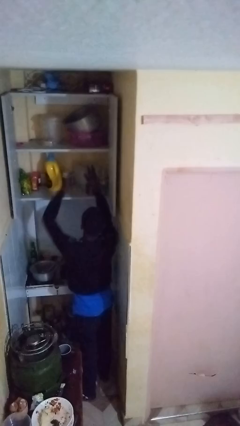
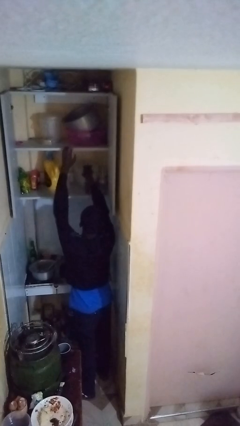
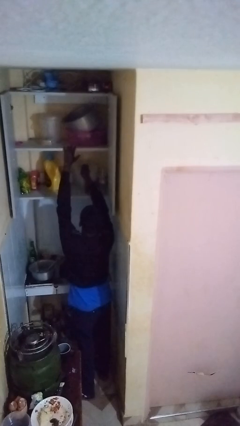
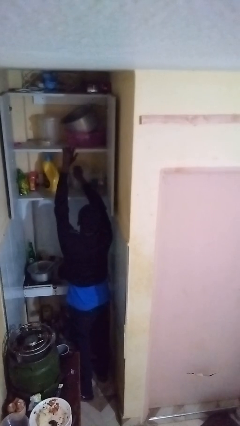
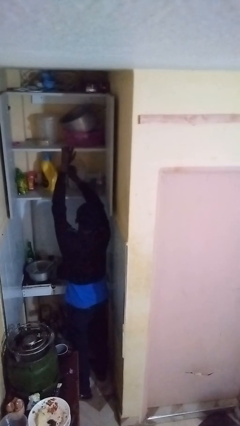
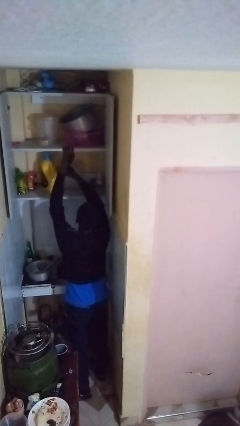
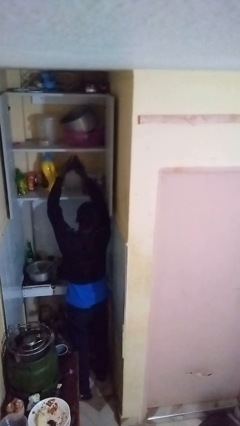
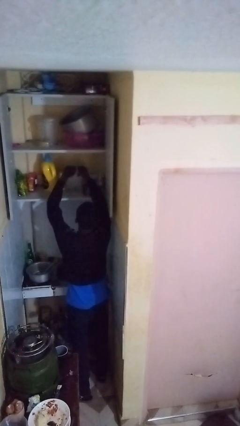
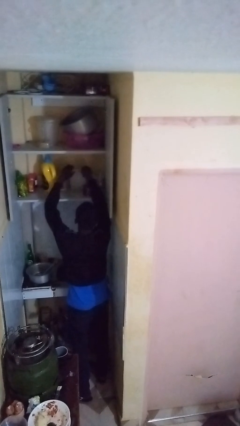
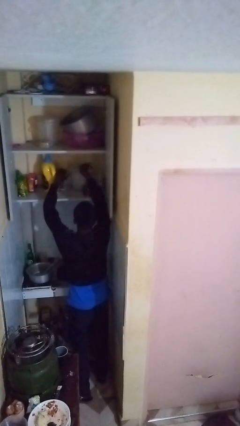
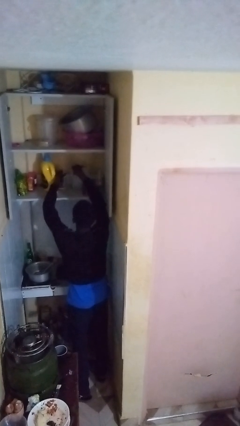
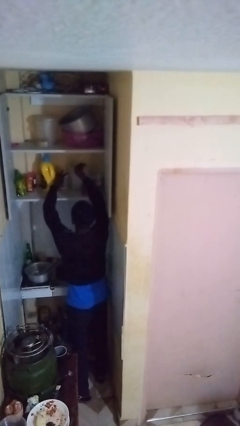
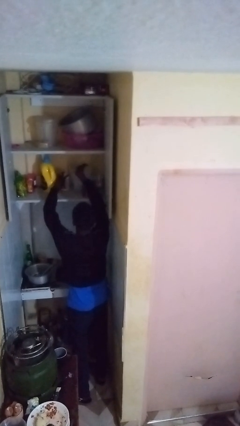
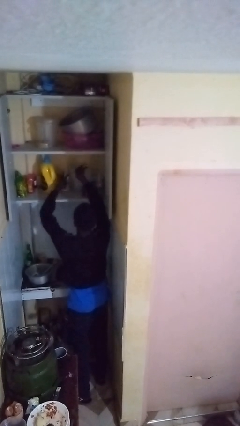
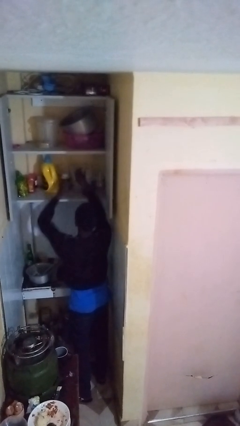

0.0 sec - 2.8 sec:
person searches in kitchen drawer

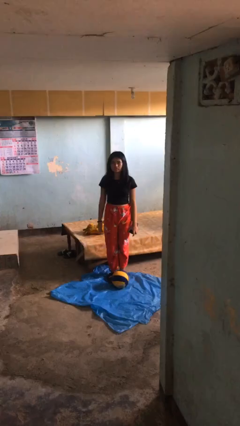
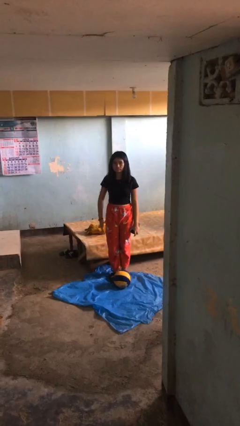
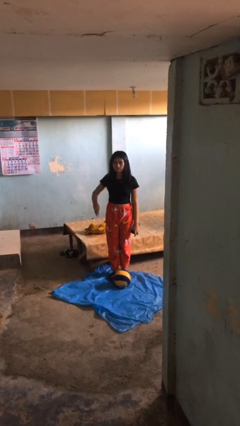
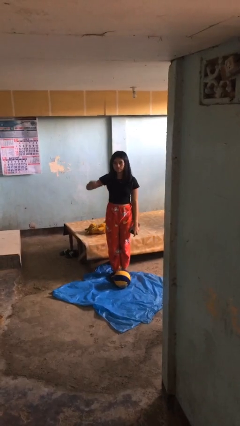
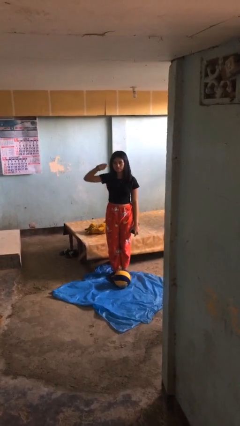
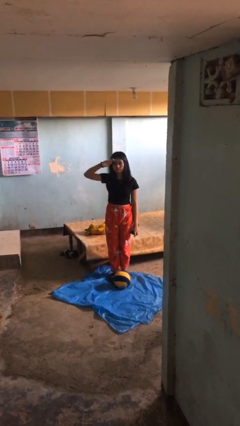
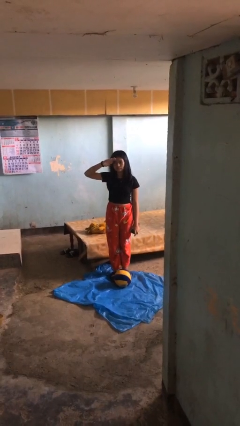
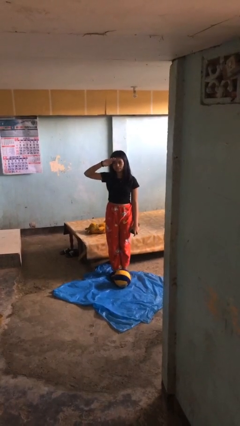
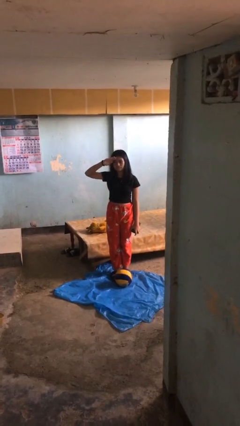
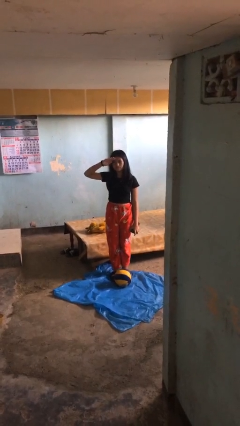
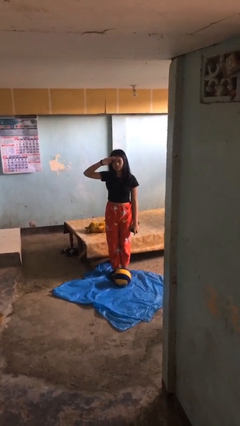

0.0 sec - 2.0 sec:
person salutes

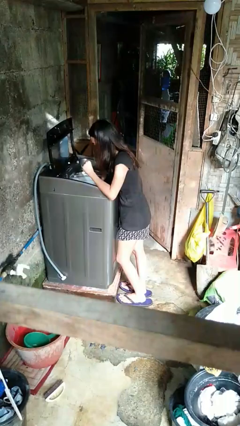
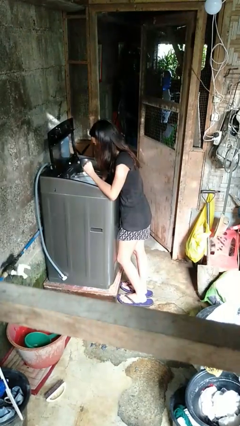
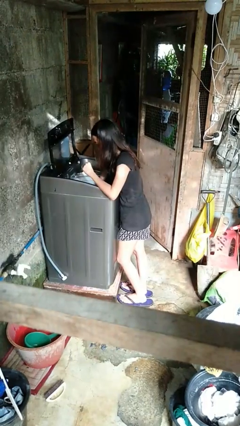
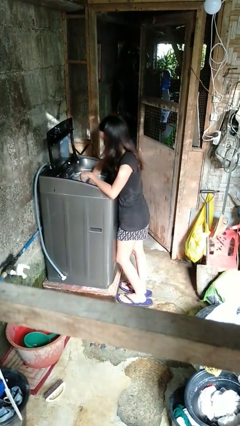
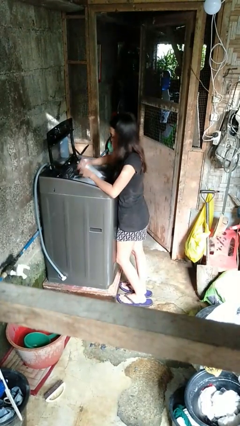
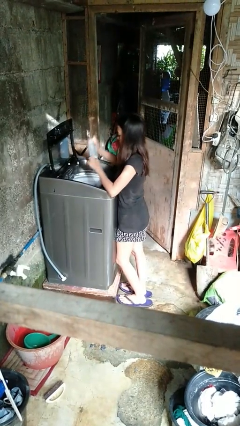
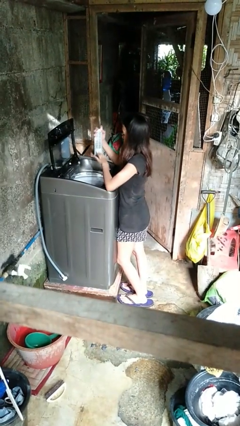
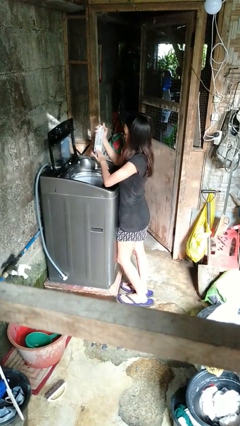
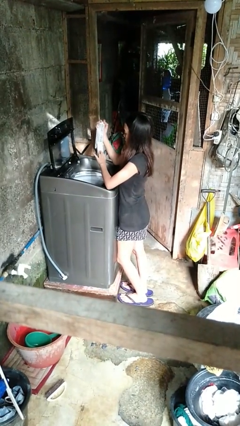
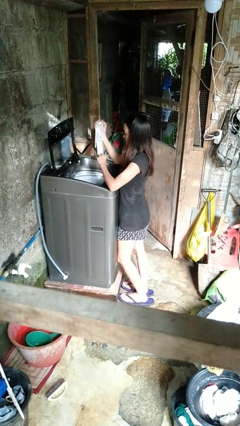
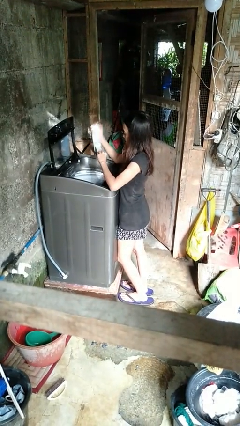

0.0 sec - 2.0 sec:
person cleans dryer lint trap

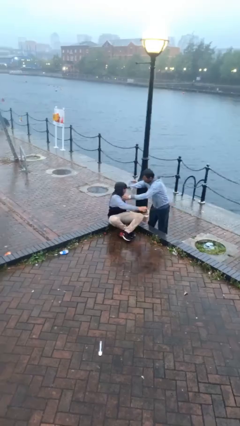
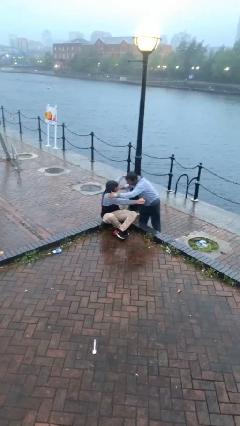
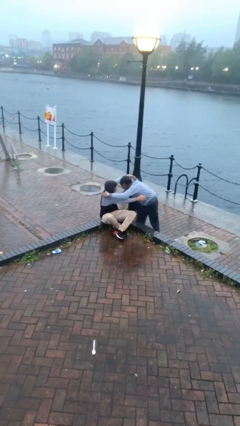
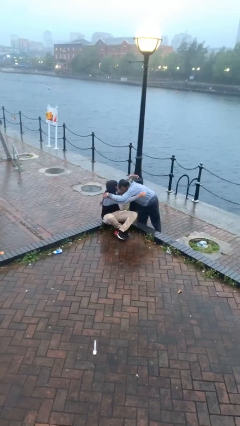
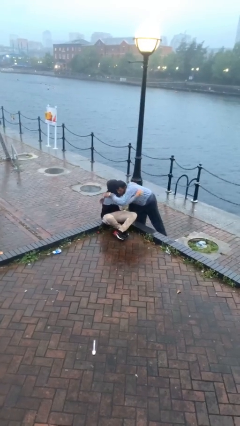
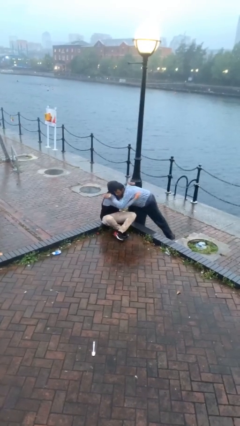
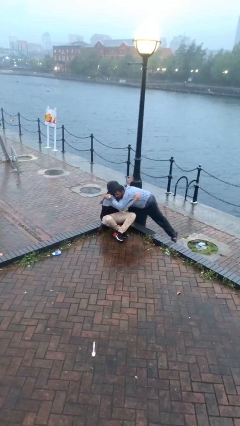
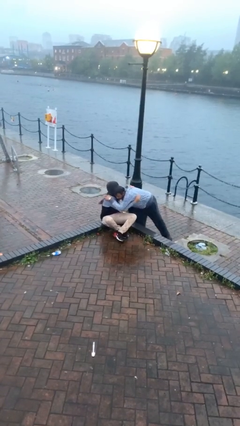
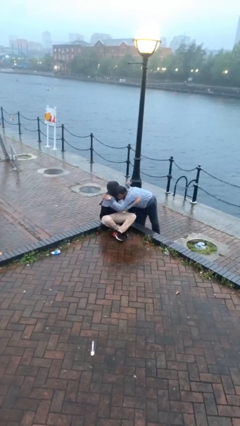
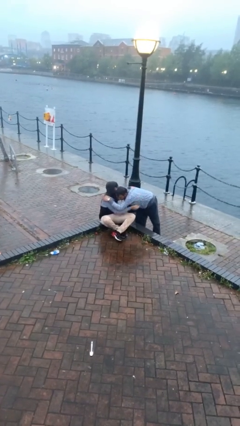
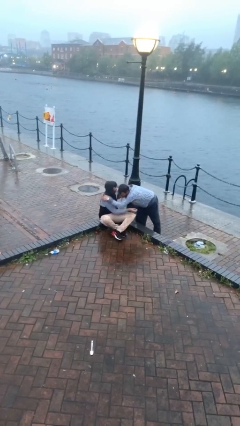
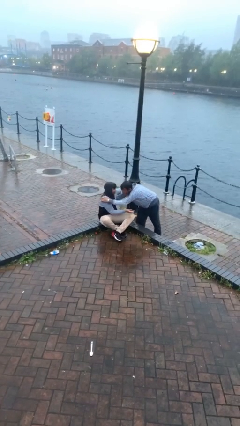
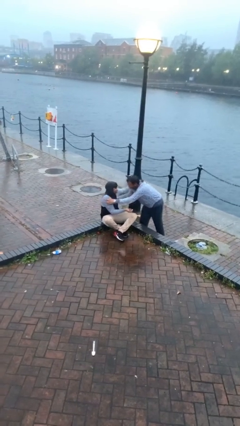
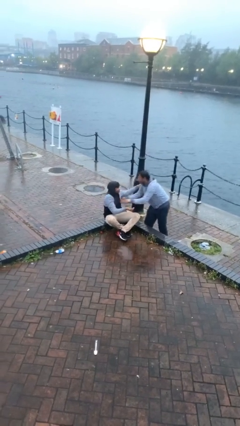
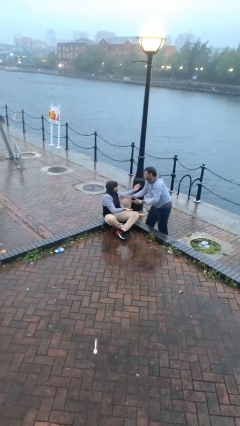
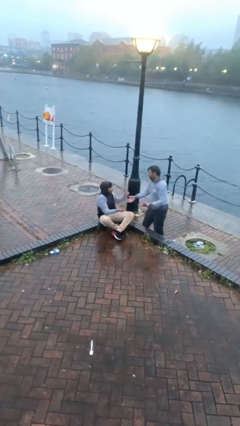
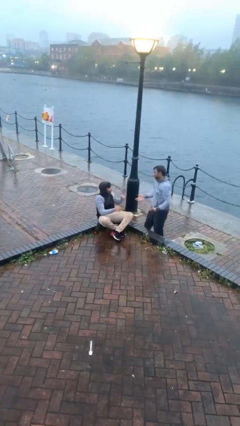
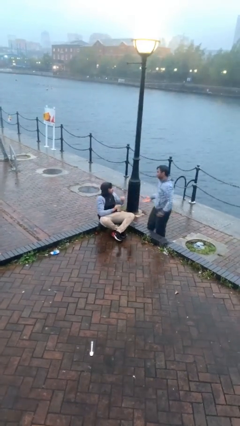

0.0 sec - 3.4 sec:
person embraces person

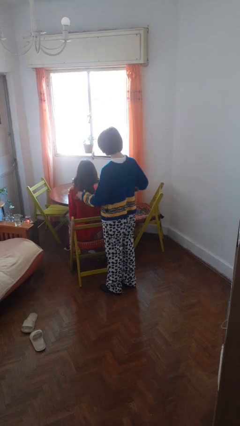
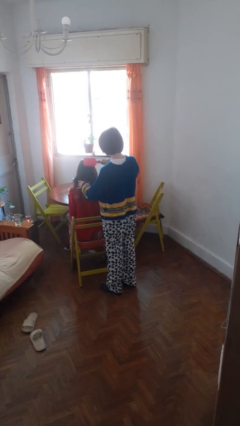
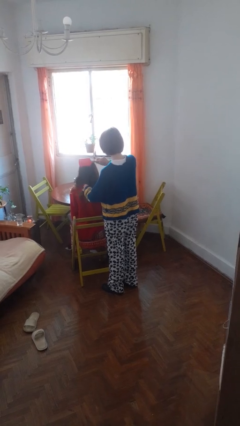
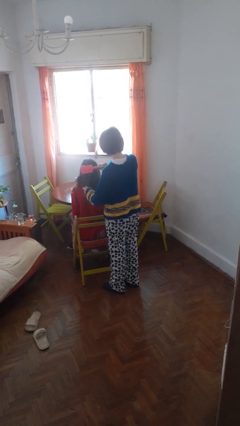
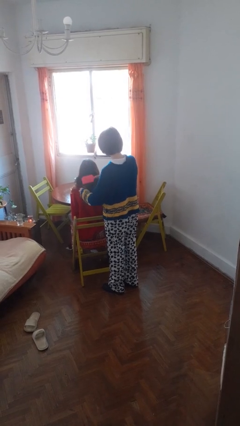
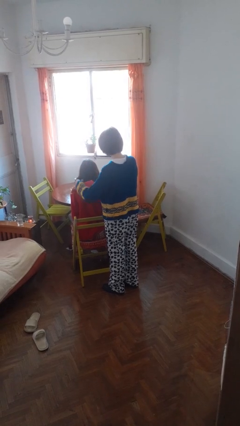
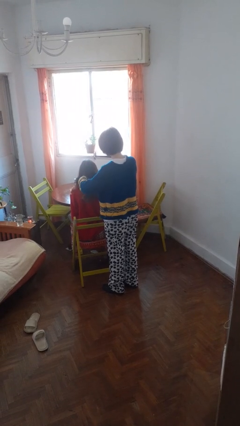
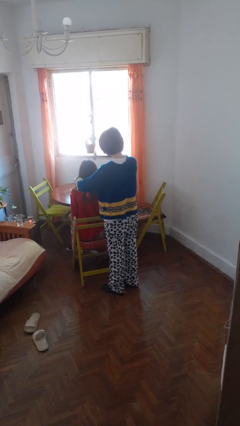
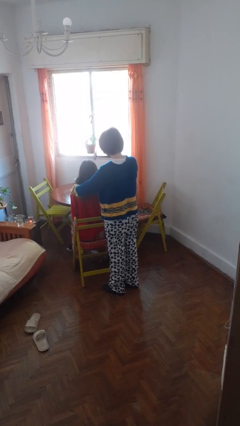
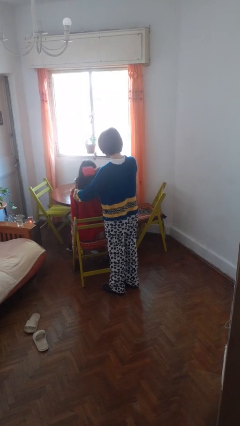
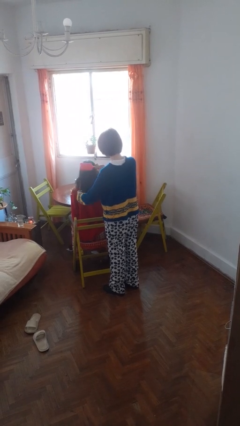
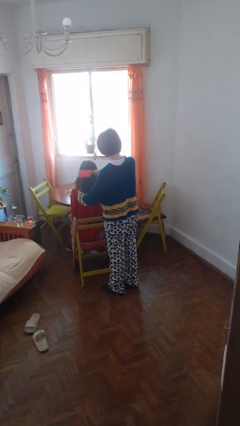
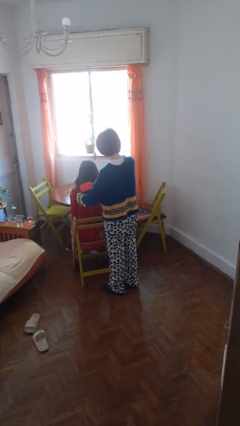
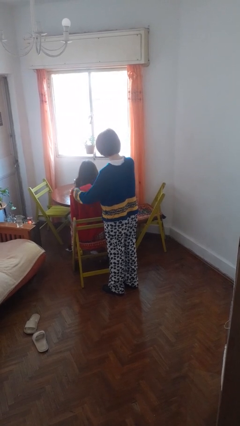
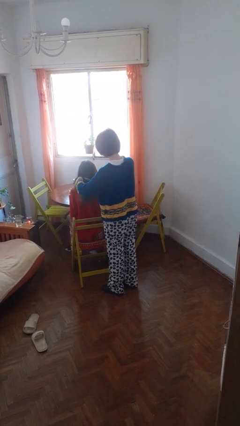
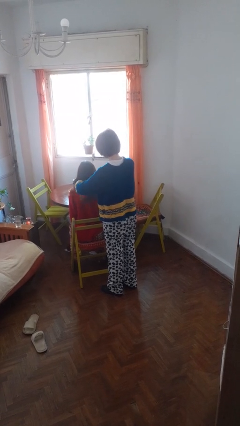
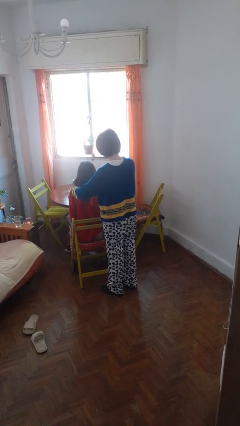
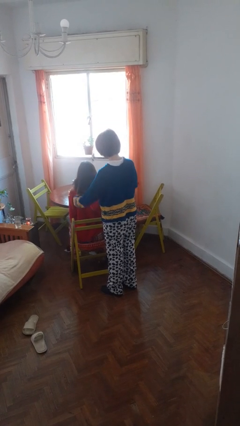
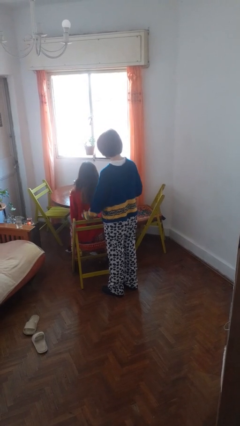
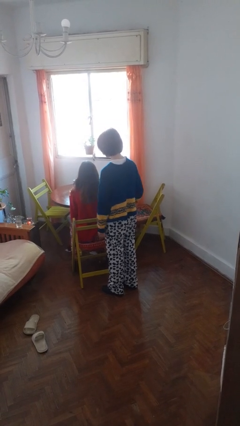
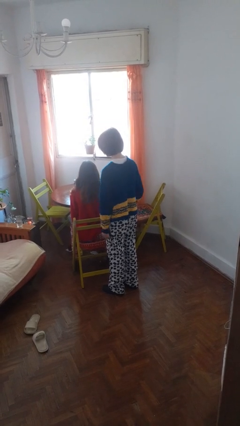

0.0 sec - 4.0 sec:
person brushes hair of person

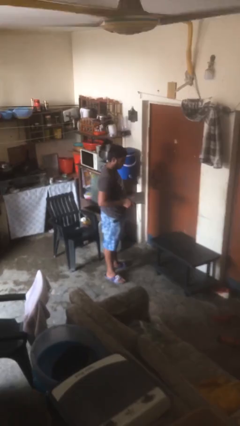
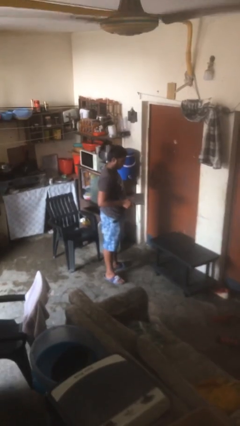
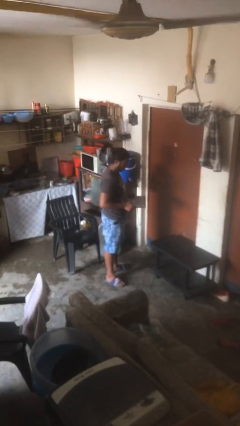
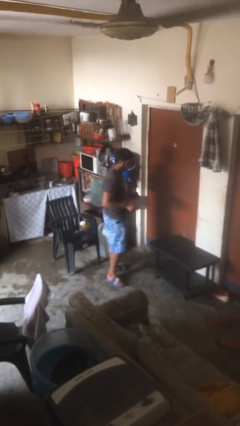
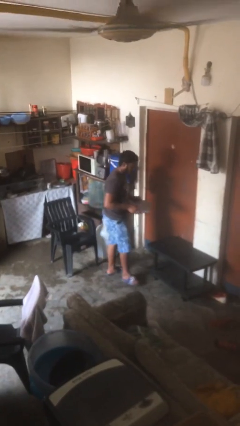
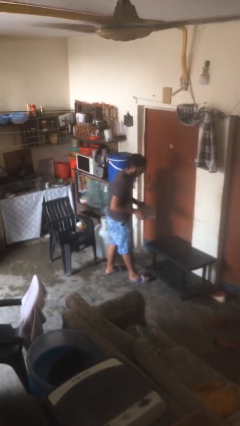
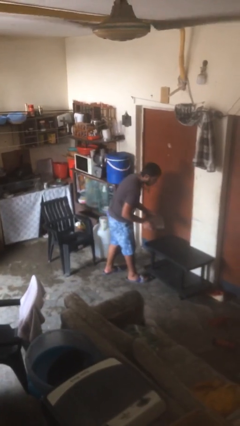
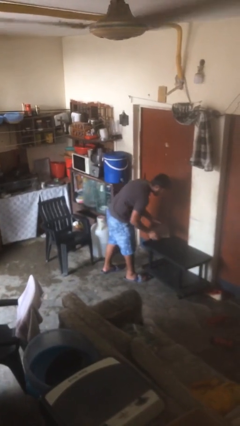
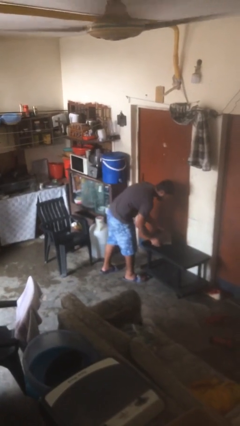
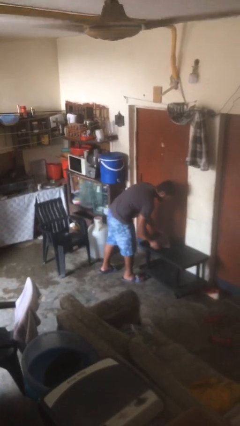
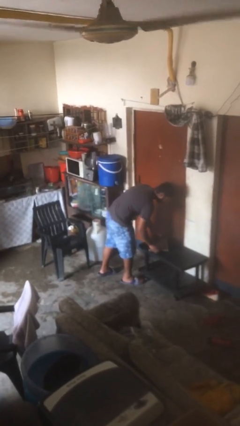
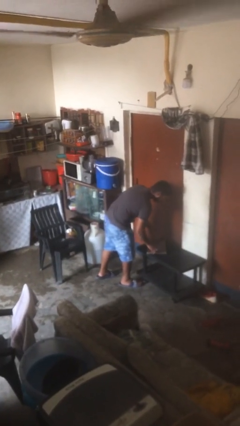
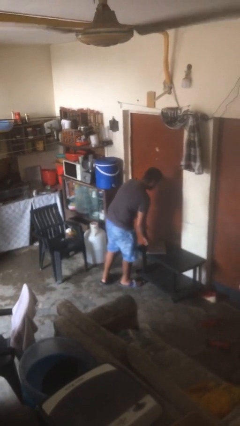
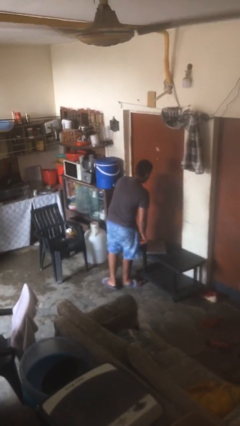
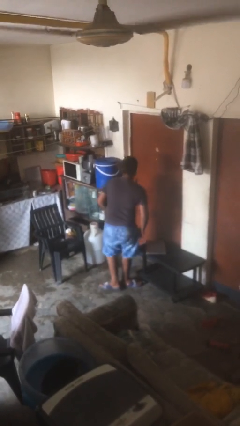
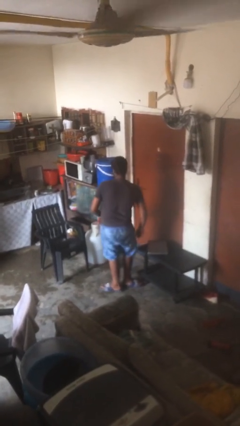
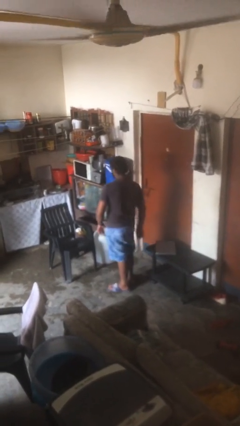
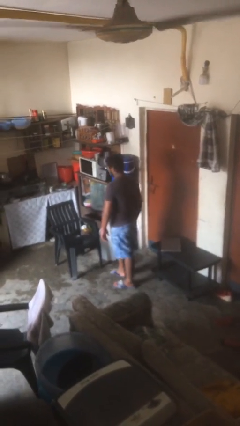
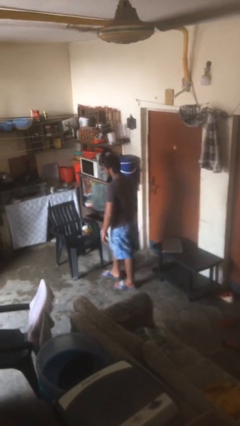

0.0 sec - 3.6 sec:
person puts down object on table
